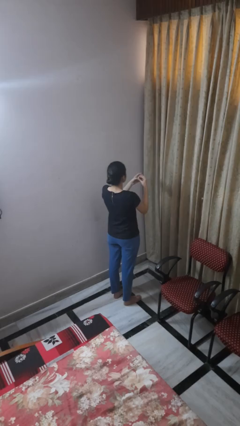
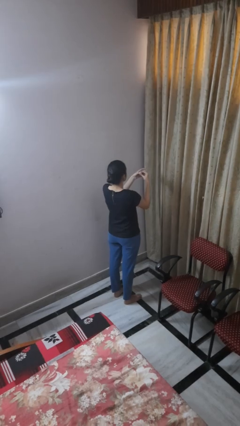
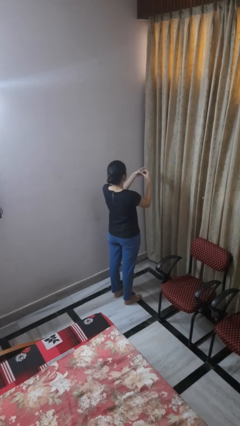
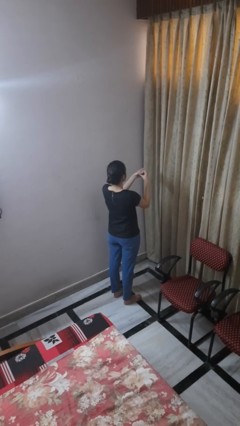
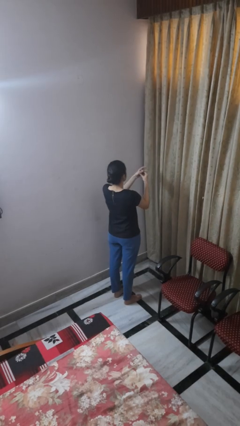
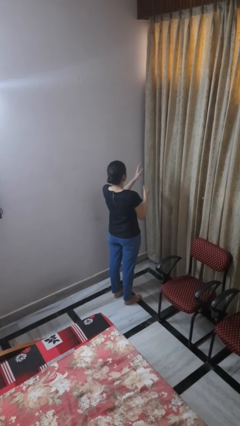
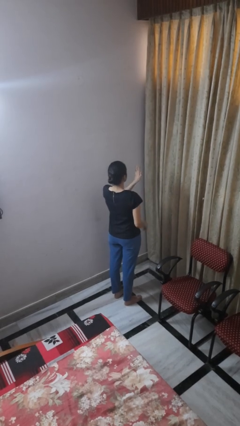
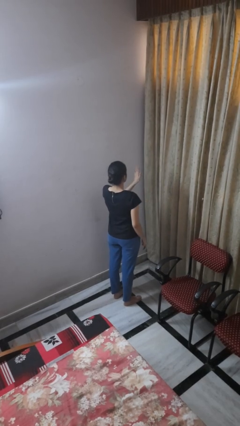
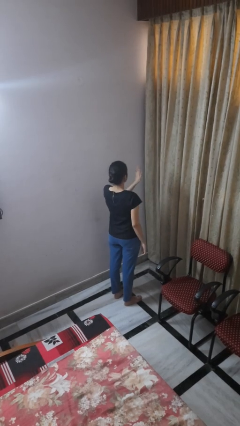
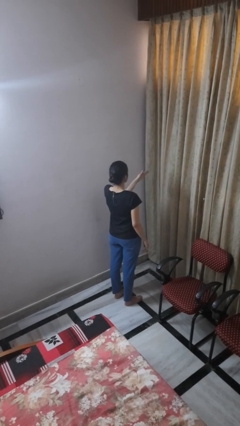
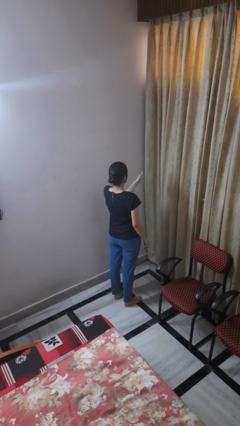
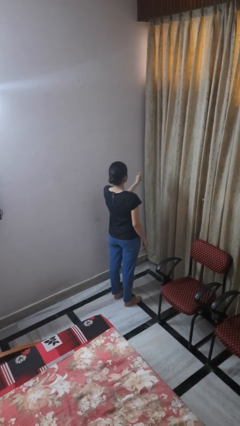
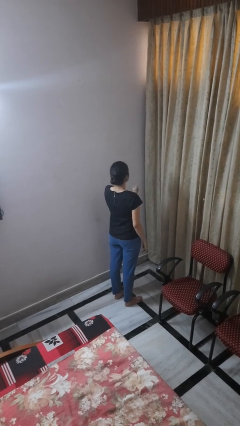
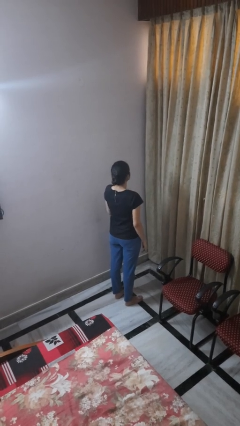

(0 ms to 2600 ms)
person puts on ring

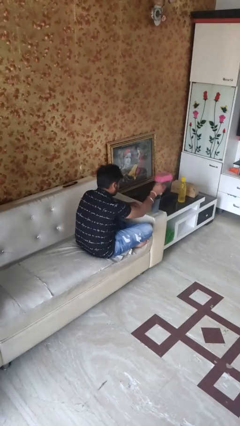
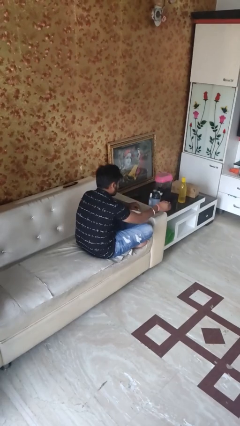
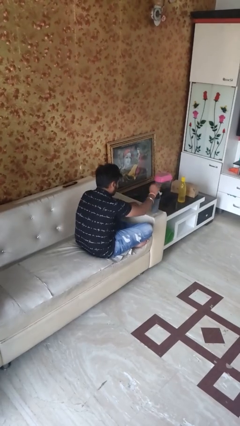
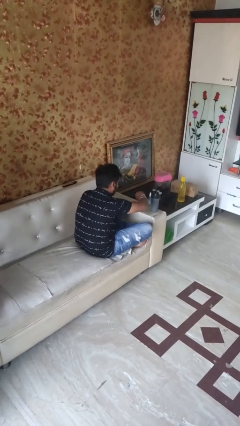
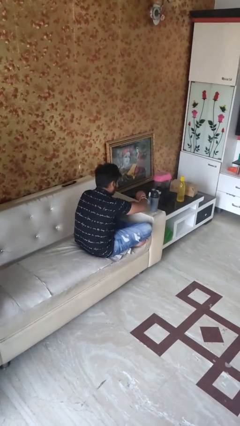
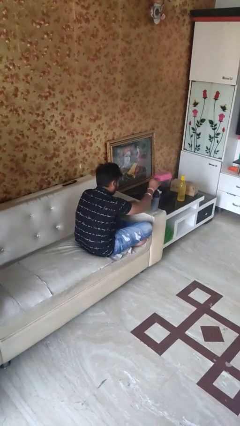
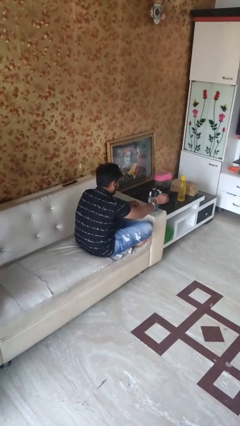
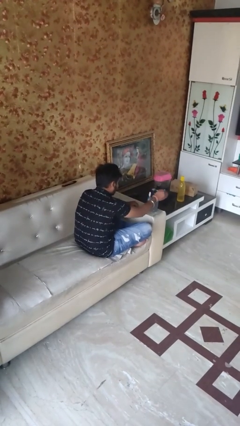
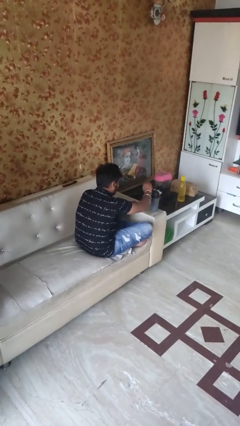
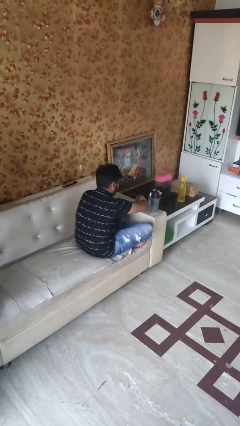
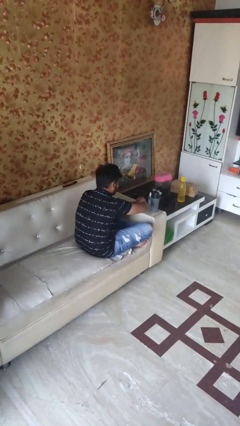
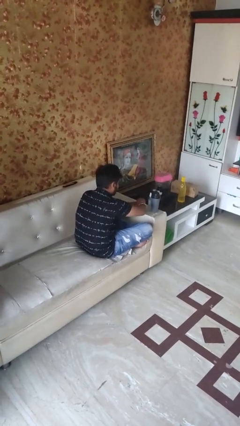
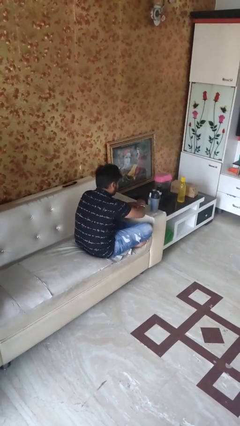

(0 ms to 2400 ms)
person waves hand over object

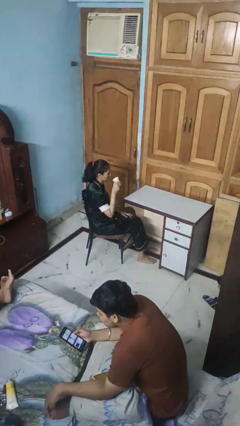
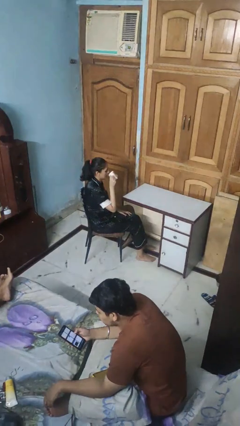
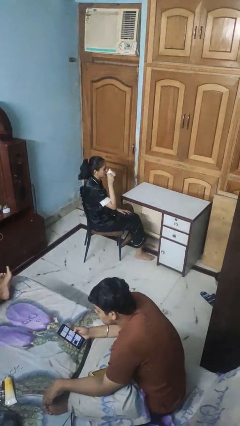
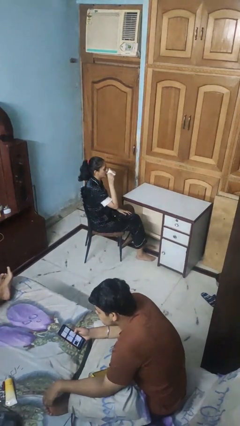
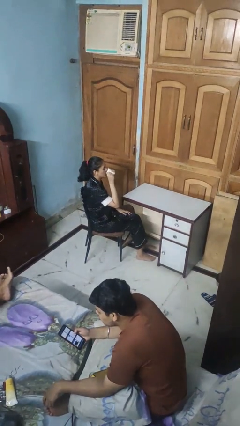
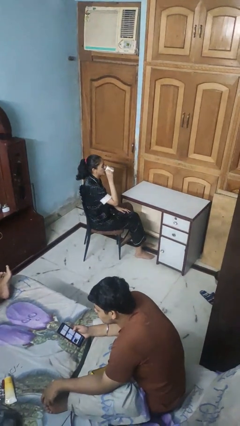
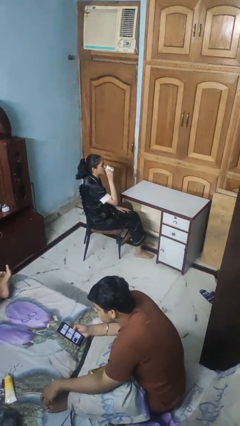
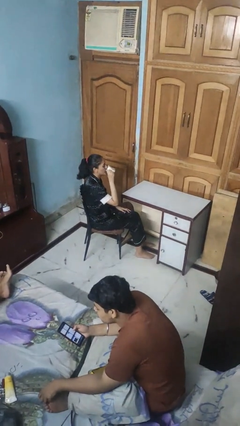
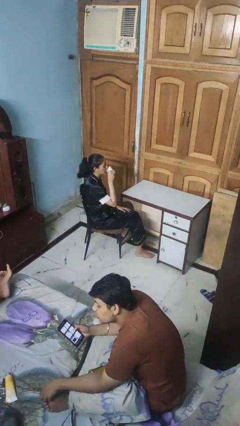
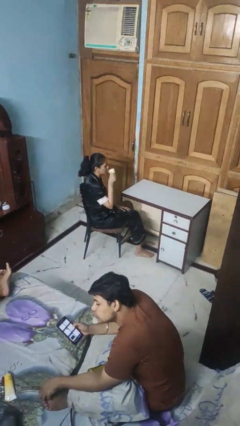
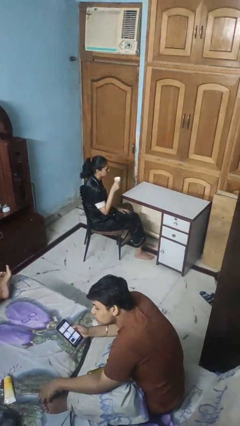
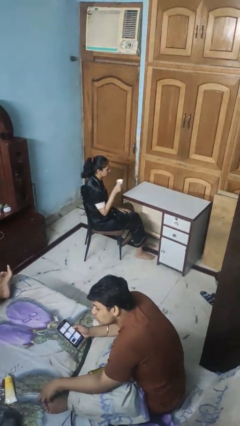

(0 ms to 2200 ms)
person drinks from mug

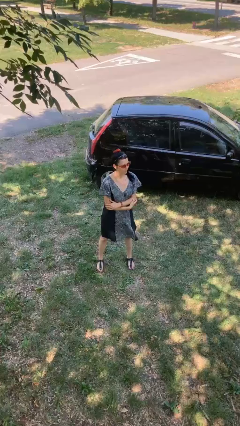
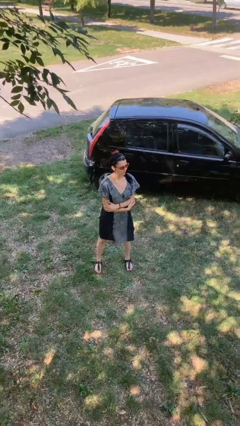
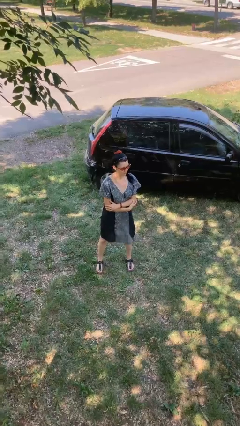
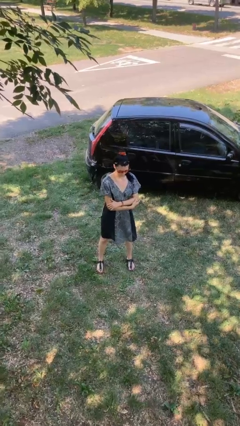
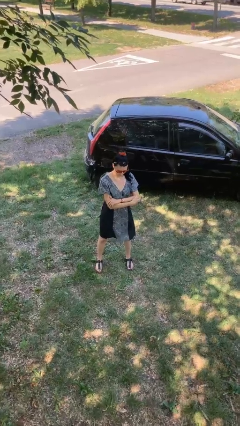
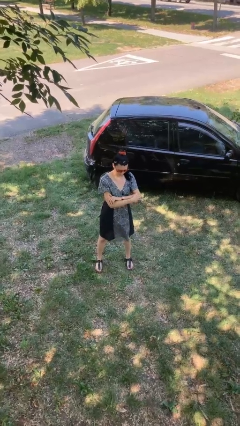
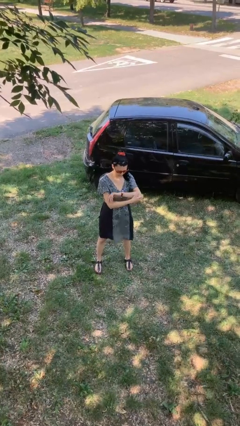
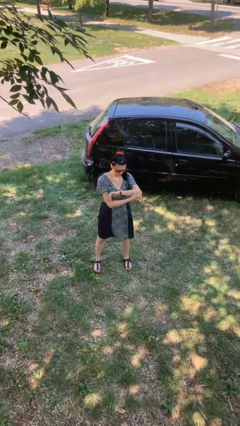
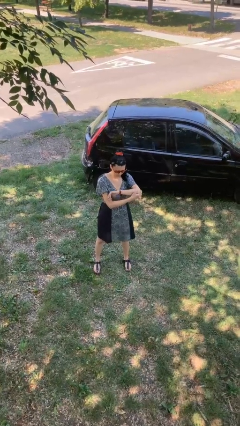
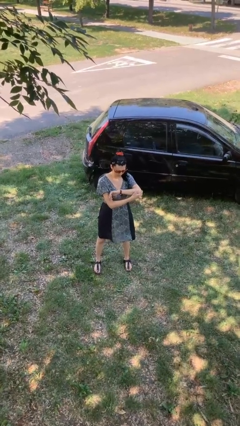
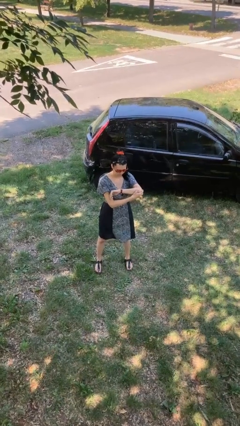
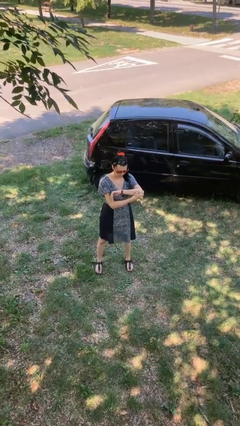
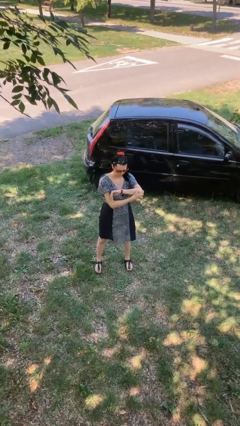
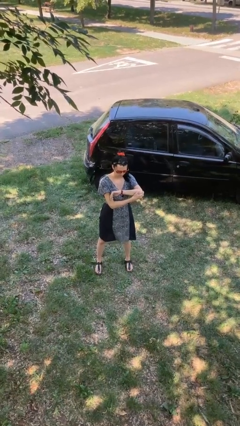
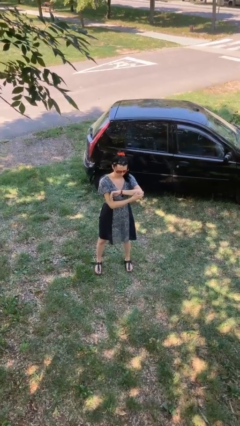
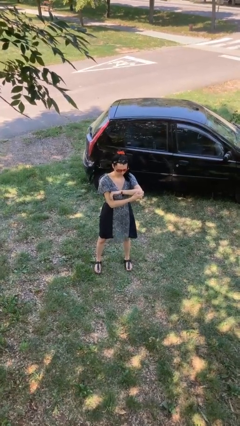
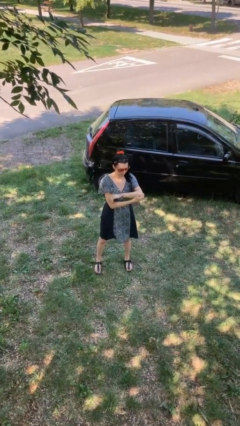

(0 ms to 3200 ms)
person looks at wristwatch

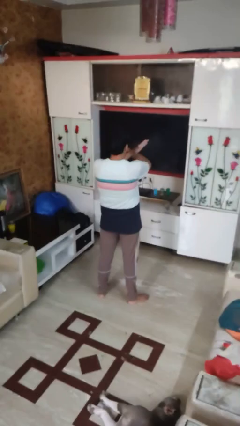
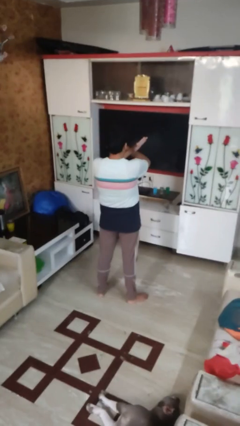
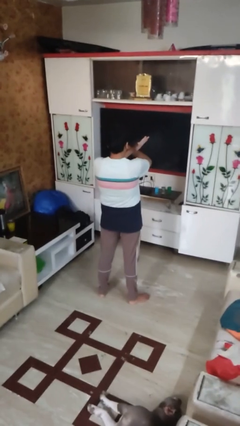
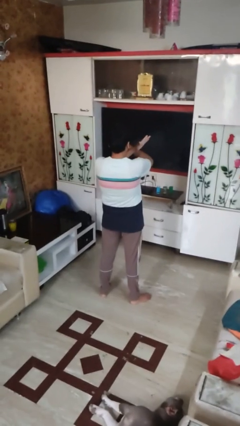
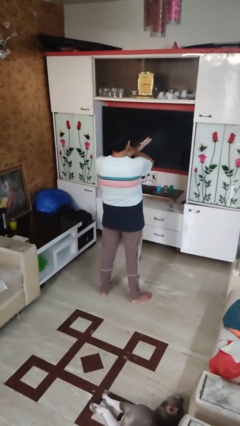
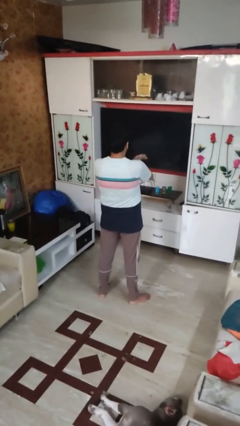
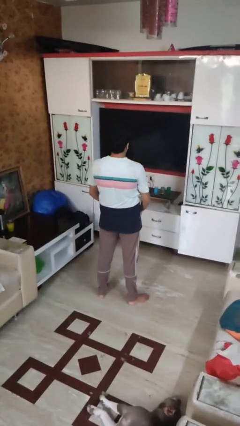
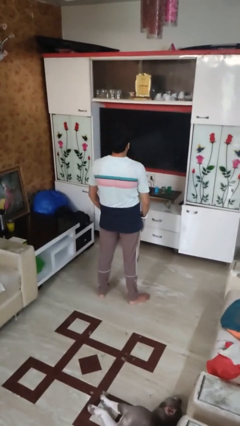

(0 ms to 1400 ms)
person gestures arms x

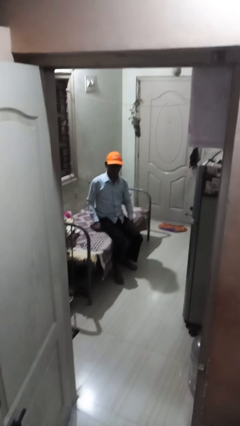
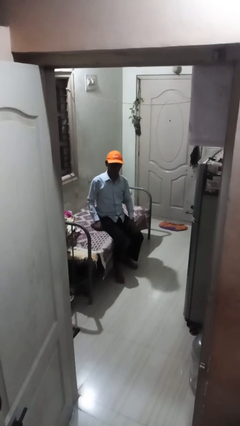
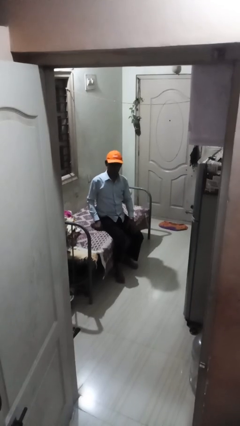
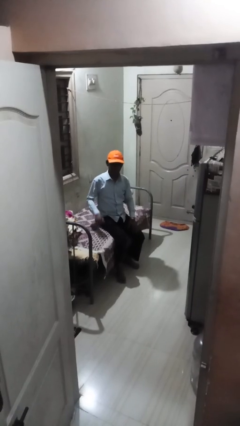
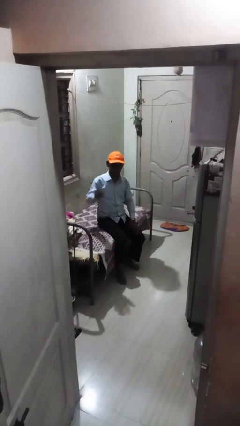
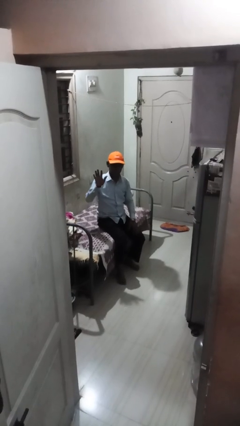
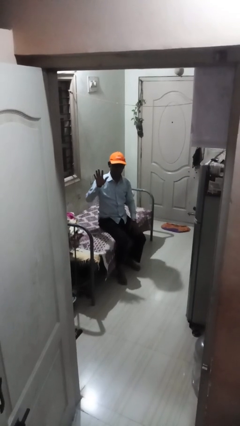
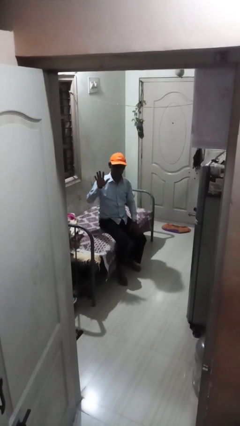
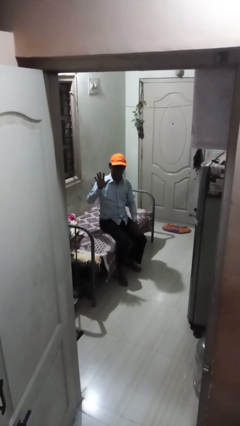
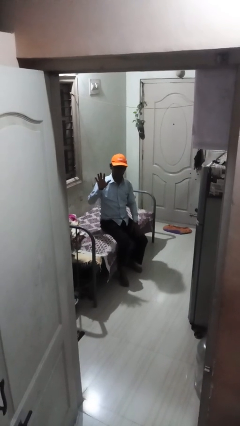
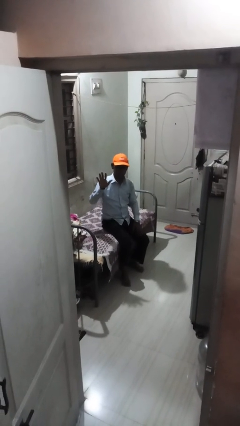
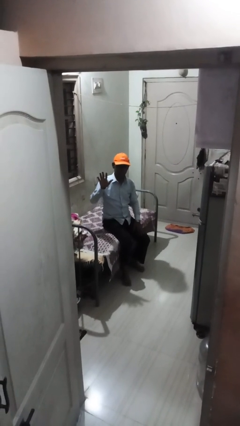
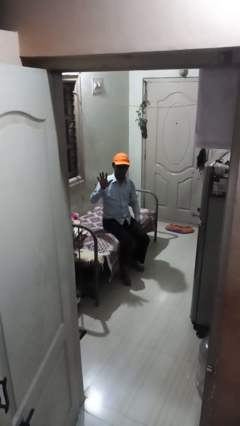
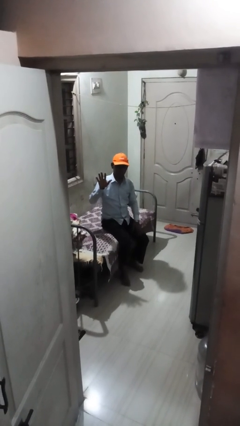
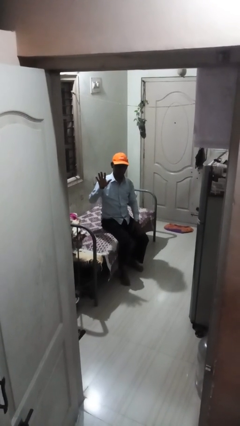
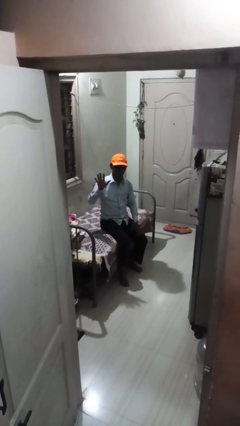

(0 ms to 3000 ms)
person gestures number five

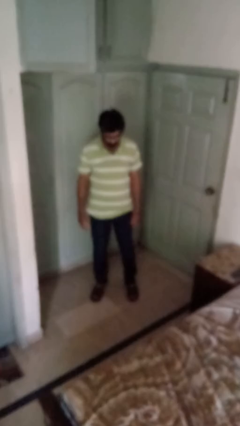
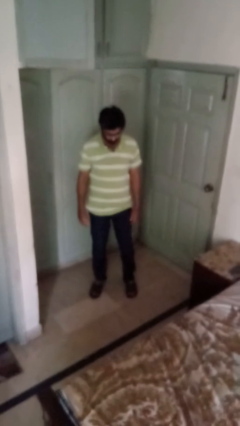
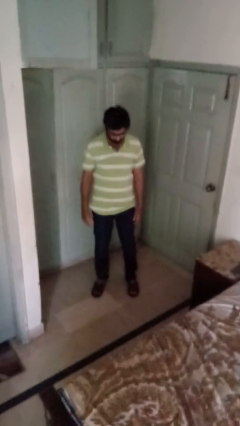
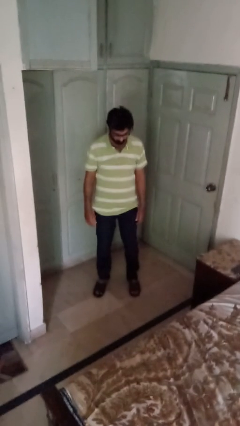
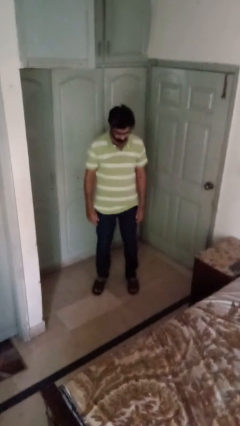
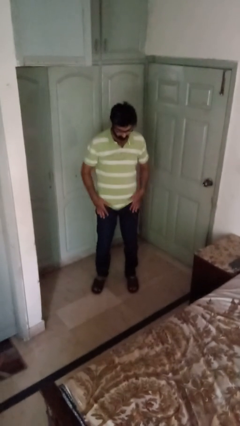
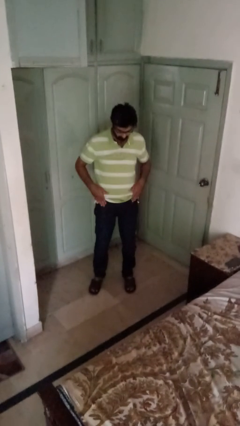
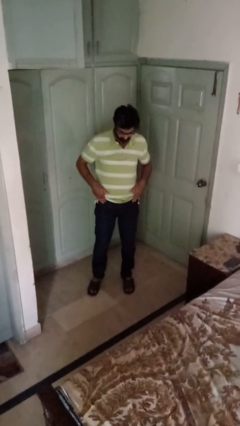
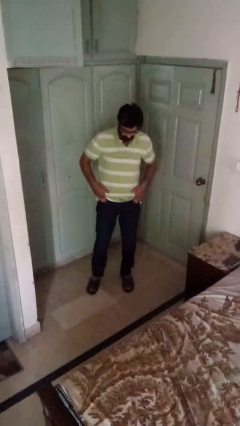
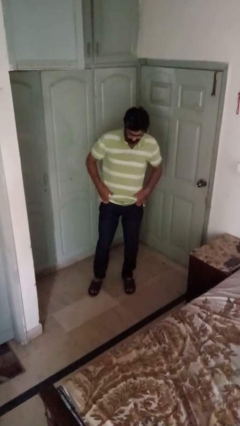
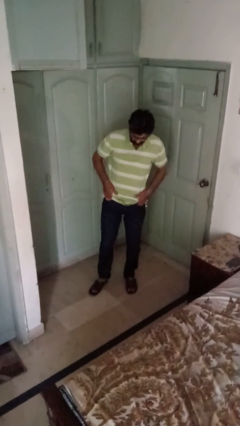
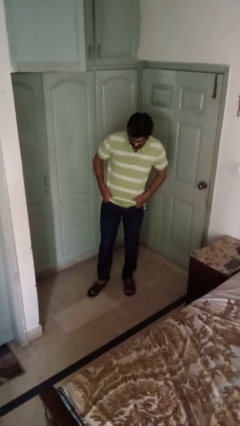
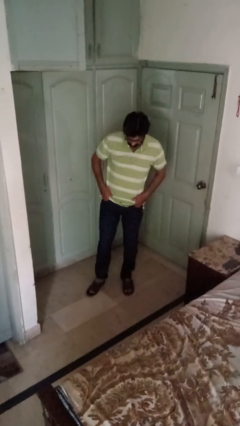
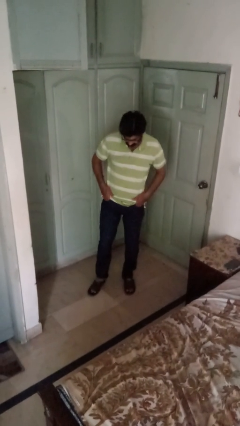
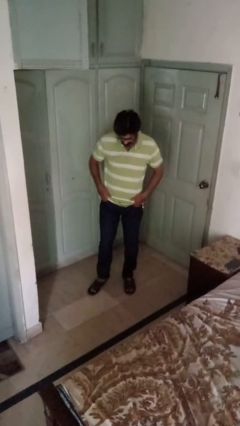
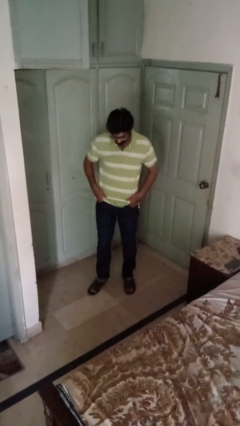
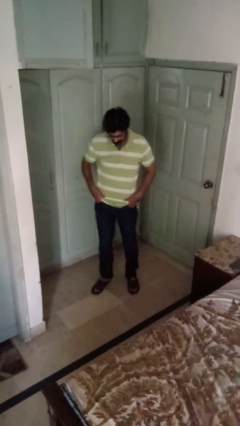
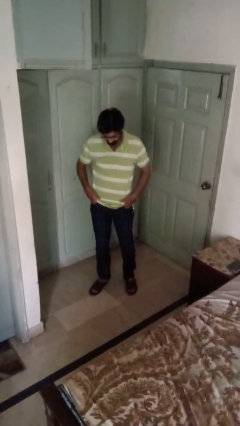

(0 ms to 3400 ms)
person puts hands in back pockets
